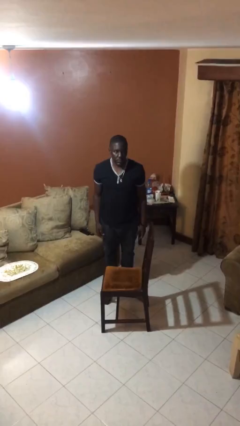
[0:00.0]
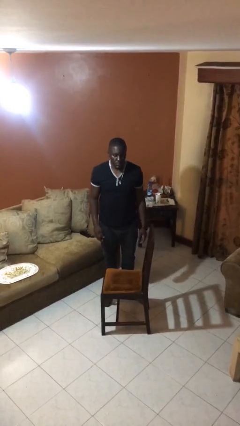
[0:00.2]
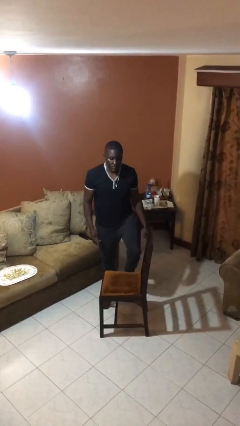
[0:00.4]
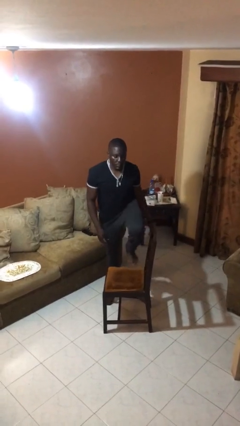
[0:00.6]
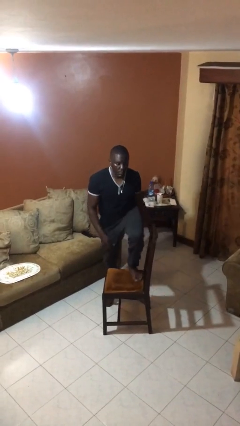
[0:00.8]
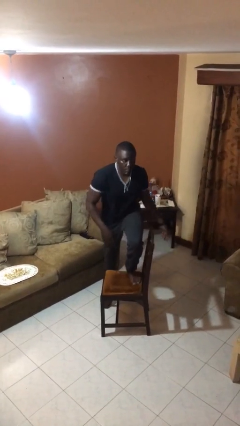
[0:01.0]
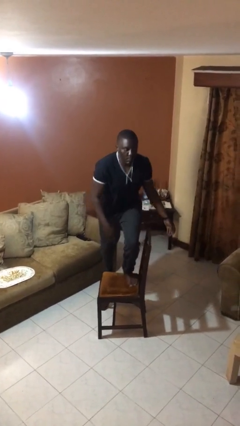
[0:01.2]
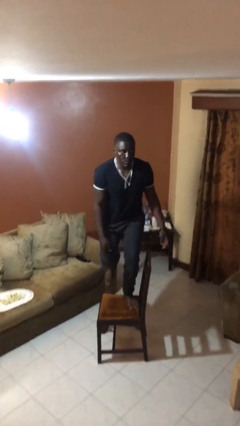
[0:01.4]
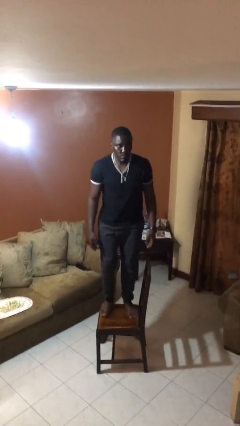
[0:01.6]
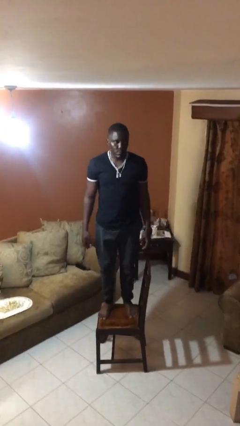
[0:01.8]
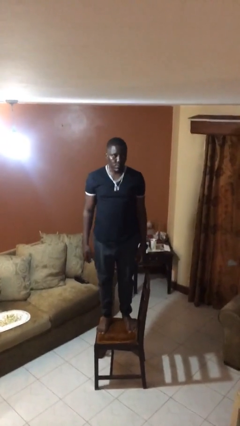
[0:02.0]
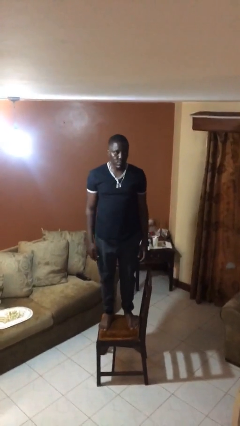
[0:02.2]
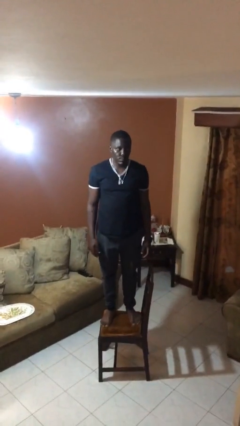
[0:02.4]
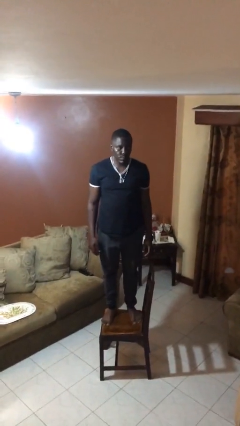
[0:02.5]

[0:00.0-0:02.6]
person climbs on chair

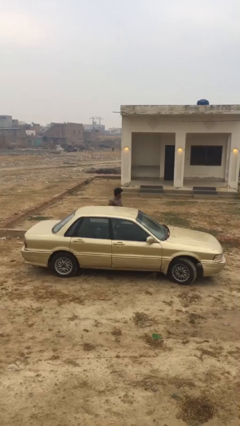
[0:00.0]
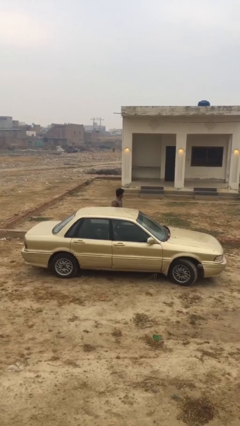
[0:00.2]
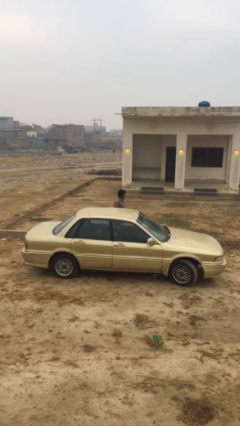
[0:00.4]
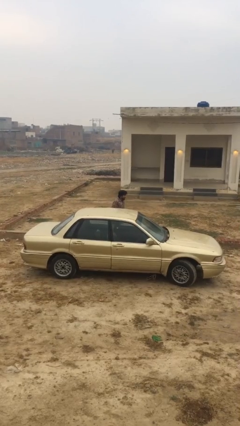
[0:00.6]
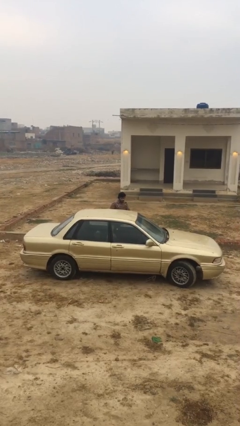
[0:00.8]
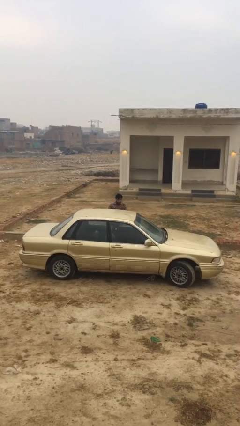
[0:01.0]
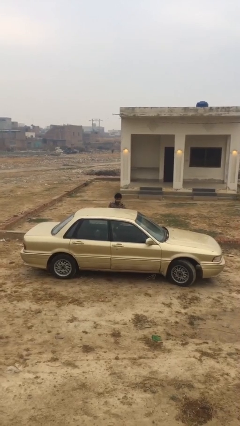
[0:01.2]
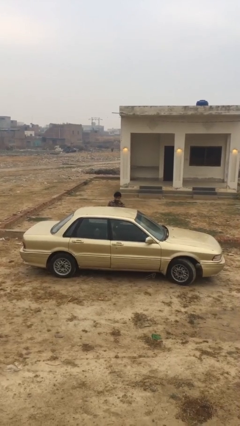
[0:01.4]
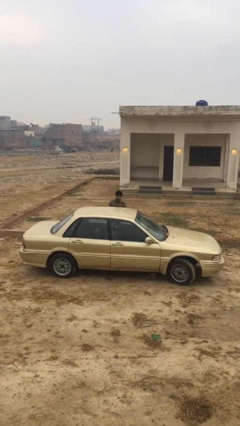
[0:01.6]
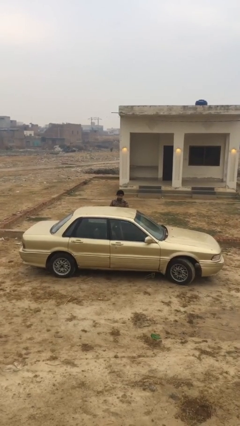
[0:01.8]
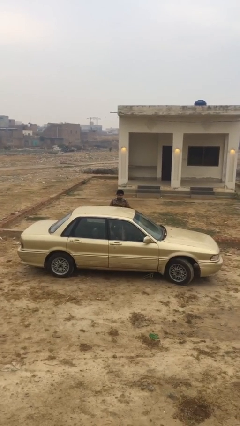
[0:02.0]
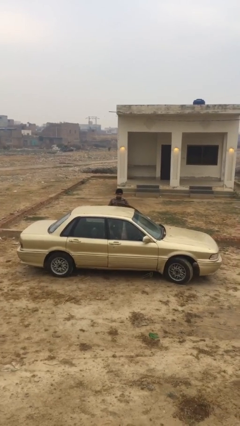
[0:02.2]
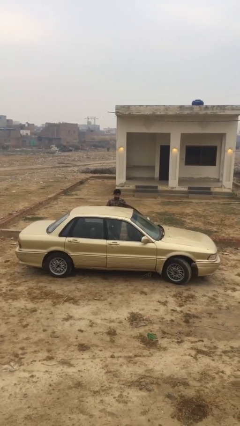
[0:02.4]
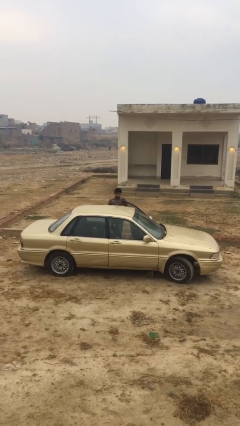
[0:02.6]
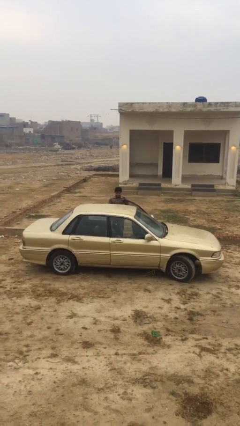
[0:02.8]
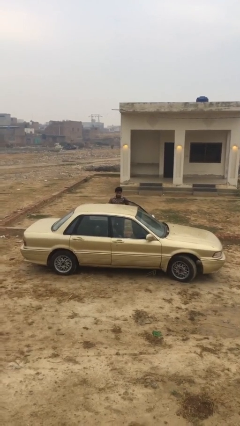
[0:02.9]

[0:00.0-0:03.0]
person opens car door

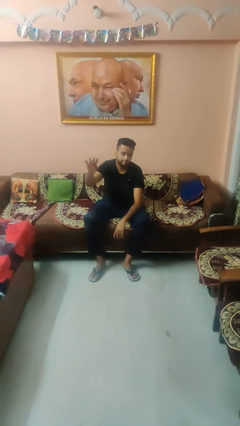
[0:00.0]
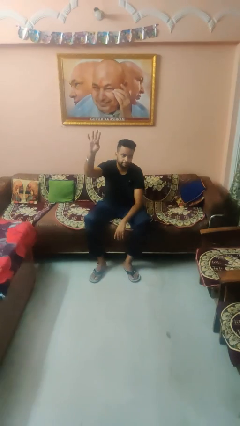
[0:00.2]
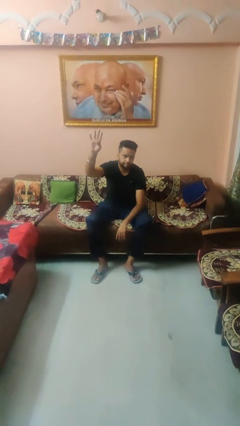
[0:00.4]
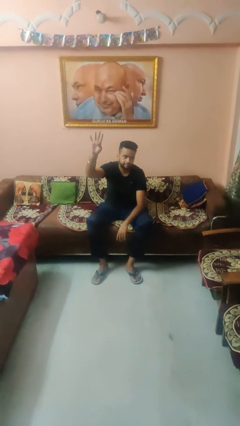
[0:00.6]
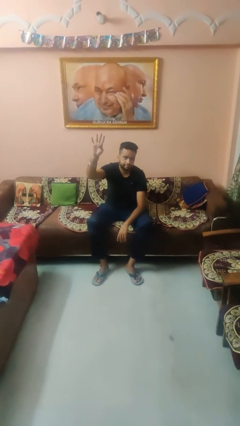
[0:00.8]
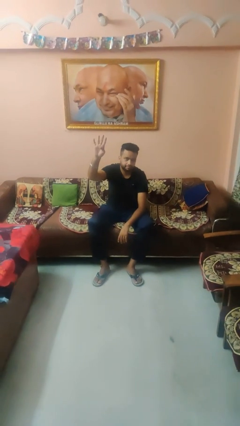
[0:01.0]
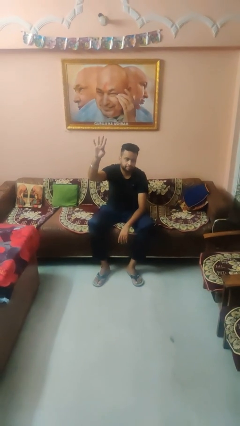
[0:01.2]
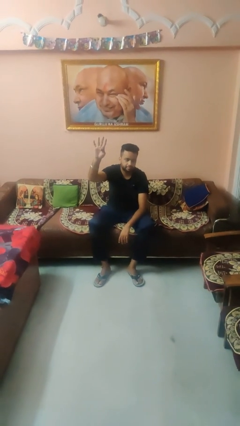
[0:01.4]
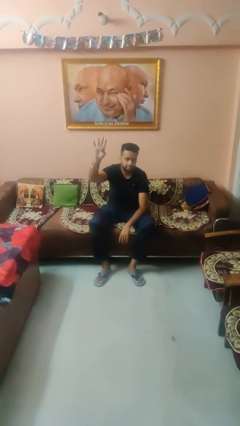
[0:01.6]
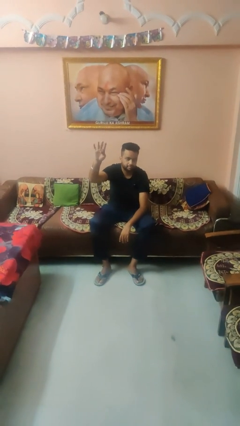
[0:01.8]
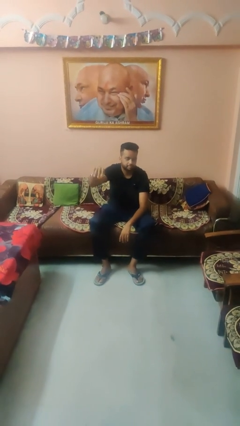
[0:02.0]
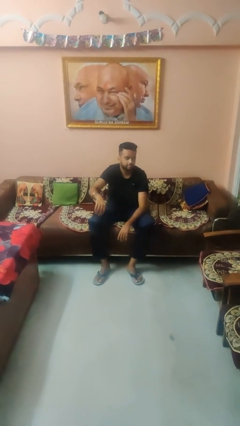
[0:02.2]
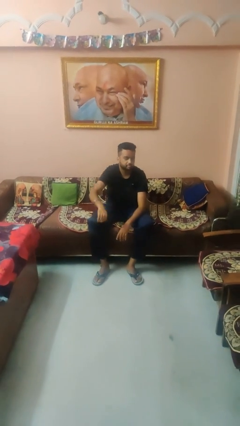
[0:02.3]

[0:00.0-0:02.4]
person gestures number four

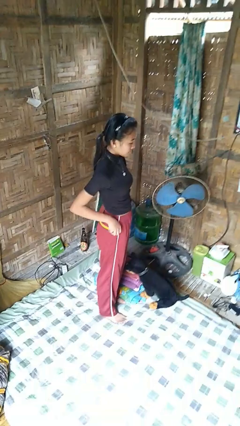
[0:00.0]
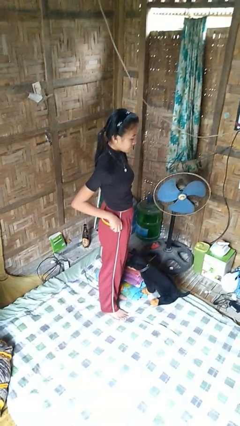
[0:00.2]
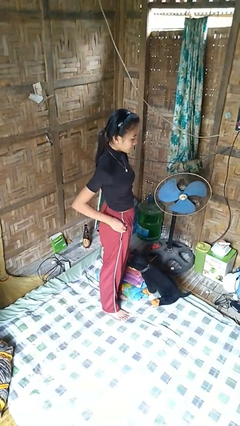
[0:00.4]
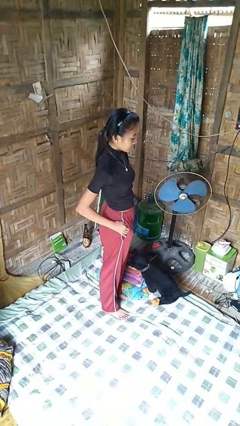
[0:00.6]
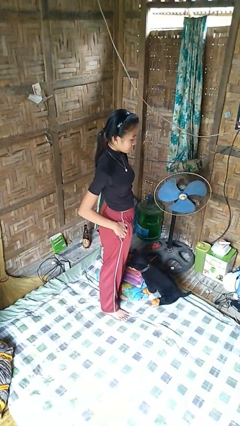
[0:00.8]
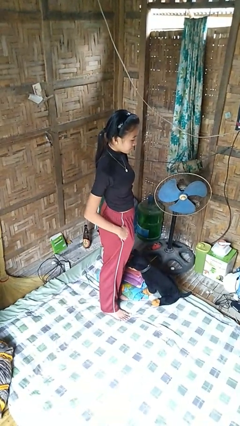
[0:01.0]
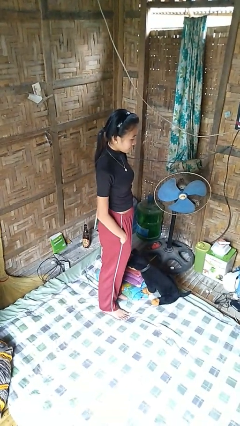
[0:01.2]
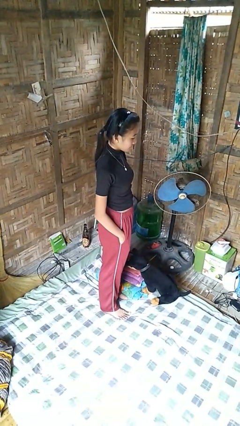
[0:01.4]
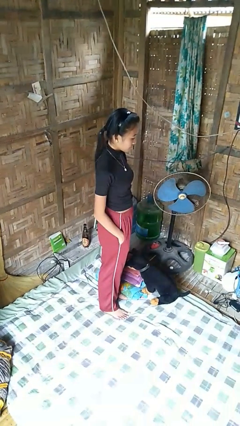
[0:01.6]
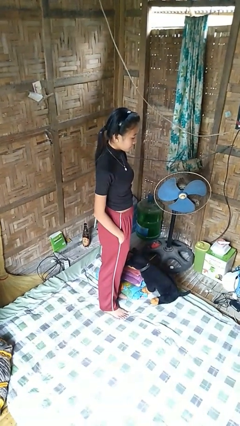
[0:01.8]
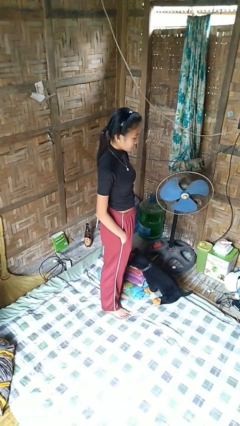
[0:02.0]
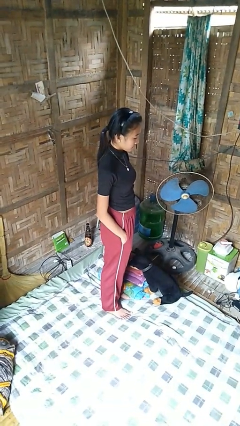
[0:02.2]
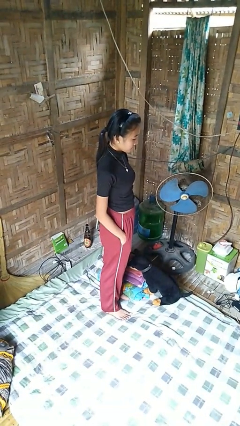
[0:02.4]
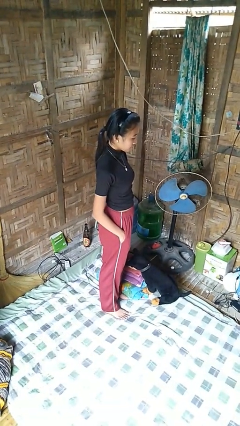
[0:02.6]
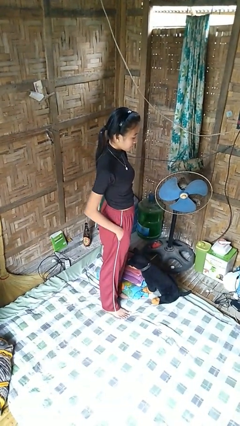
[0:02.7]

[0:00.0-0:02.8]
person puts hands in back pockets

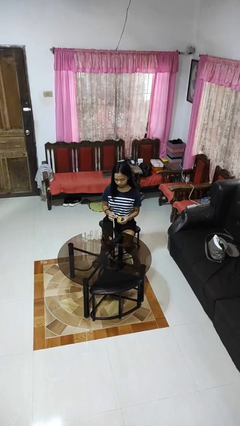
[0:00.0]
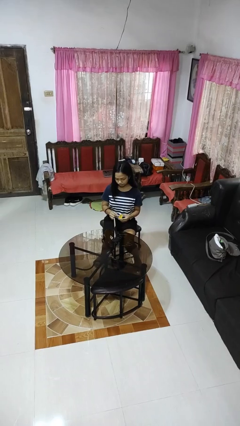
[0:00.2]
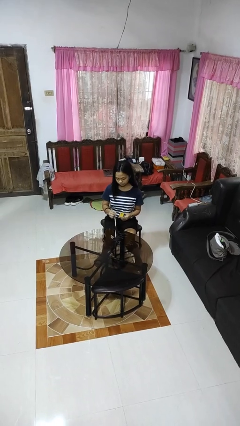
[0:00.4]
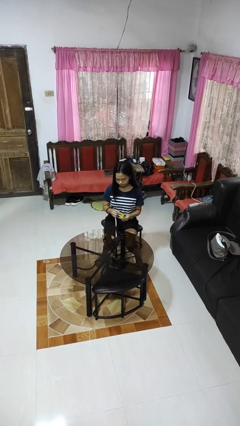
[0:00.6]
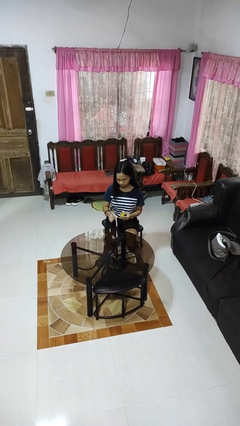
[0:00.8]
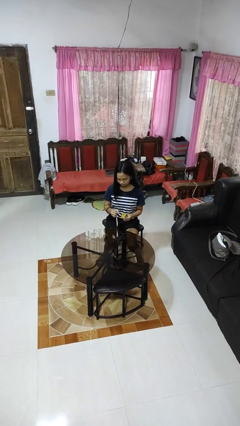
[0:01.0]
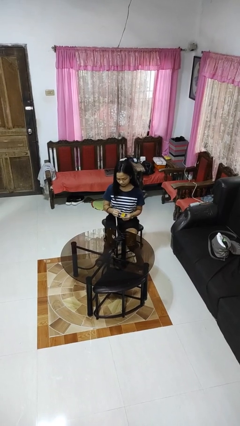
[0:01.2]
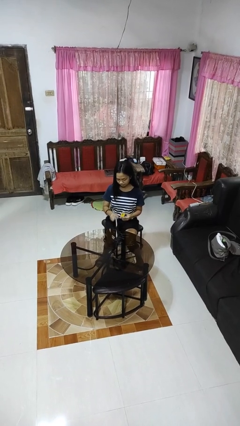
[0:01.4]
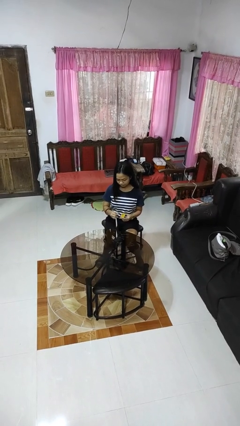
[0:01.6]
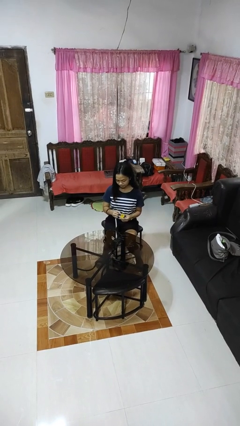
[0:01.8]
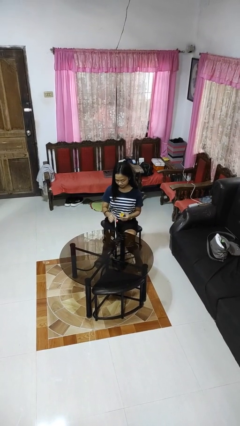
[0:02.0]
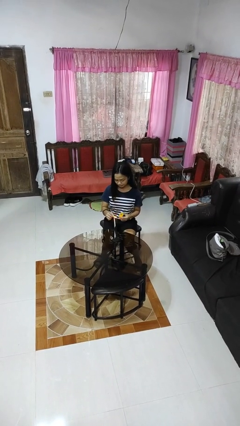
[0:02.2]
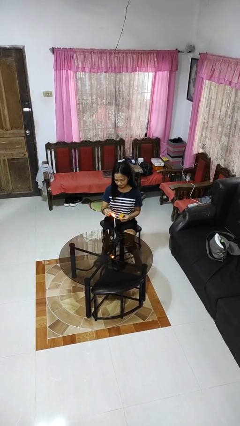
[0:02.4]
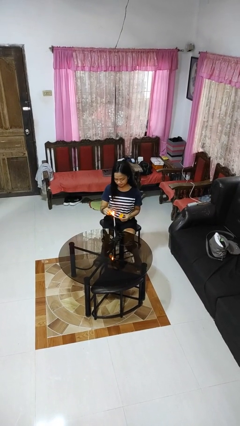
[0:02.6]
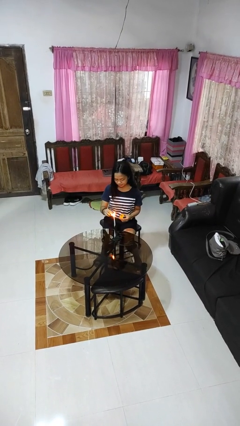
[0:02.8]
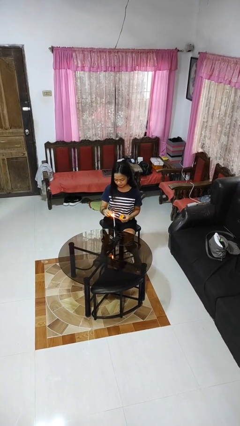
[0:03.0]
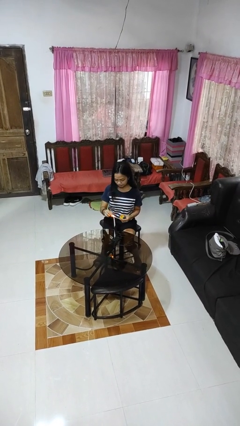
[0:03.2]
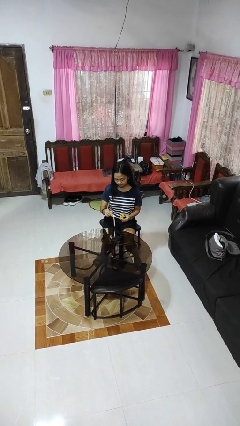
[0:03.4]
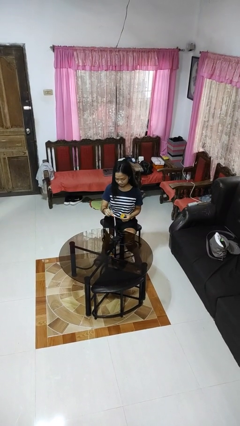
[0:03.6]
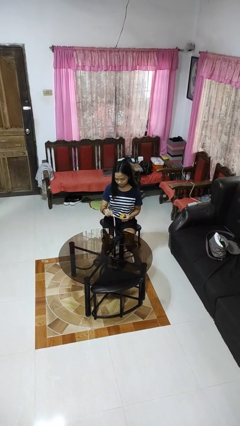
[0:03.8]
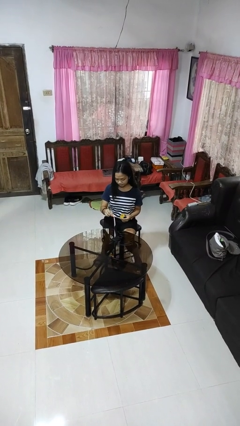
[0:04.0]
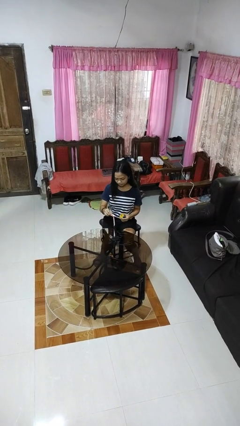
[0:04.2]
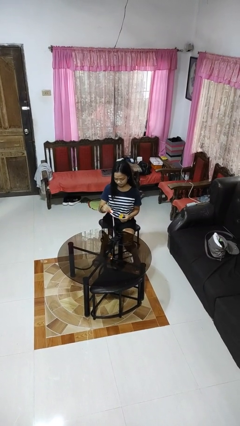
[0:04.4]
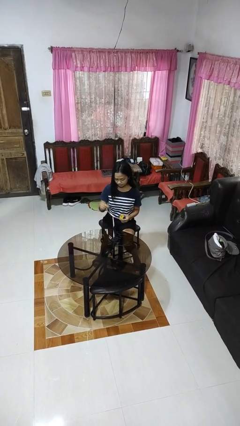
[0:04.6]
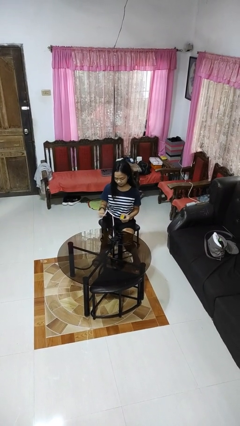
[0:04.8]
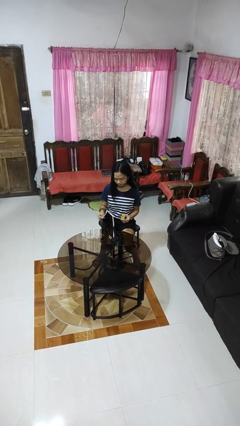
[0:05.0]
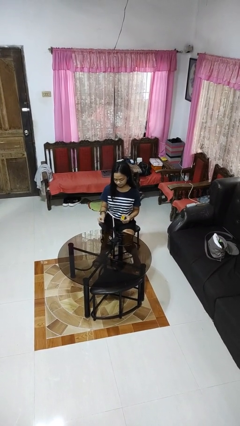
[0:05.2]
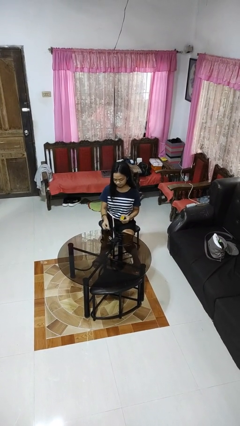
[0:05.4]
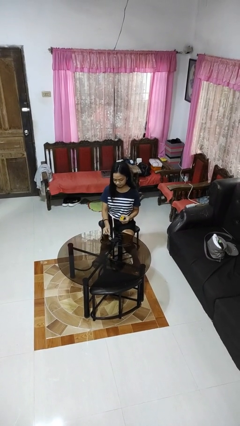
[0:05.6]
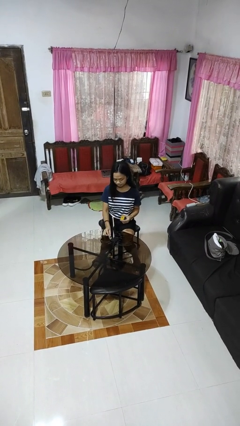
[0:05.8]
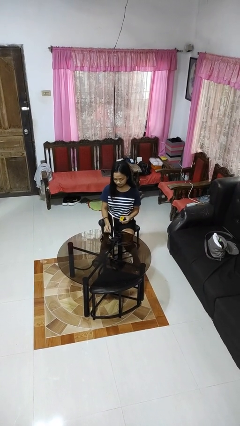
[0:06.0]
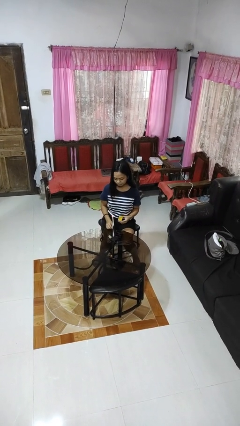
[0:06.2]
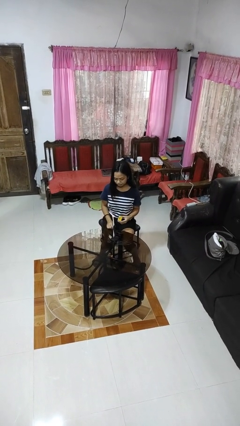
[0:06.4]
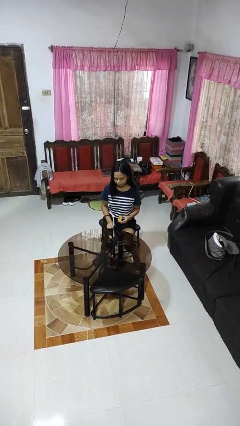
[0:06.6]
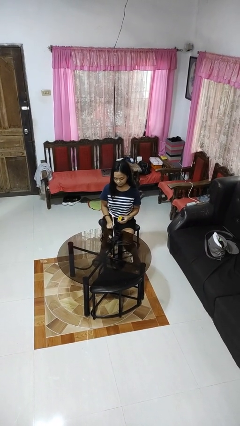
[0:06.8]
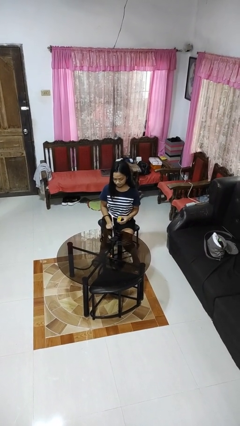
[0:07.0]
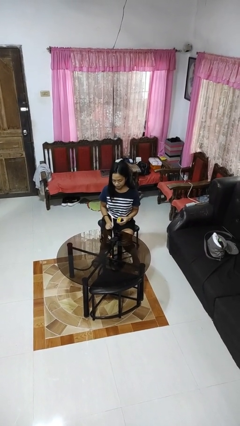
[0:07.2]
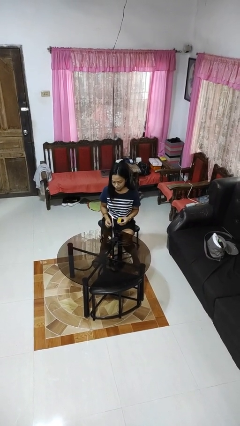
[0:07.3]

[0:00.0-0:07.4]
person lights candle
